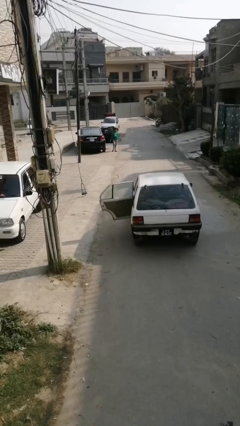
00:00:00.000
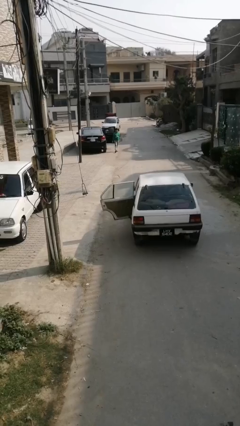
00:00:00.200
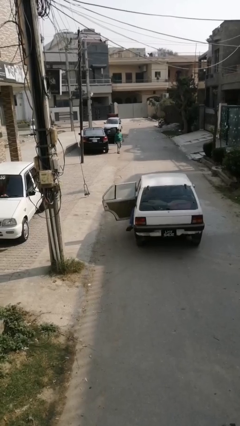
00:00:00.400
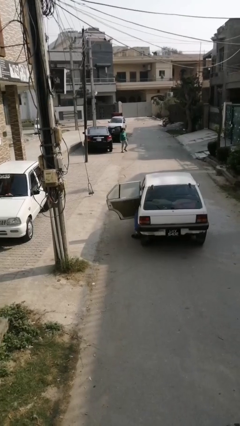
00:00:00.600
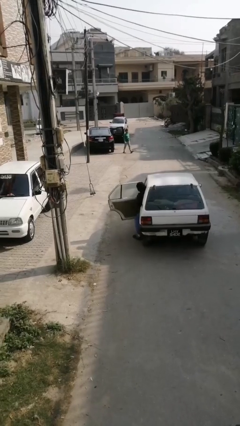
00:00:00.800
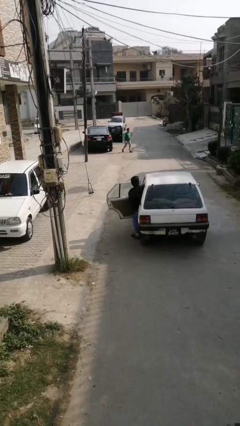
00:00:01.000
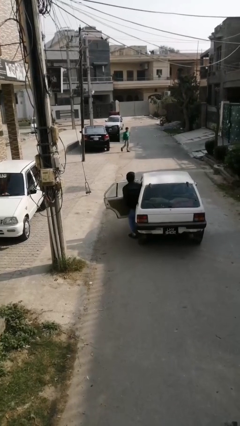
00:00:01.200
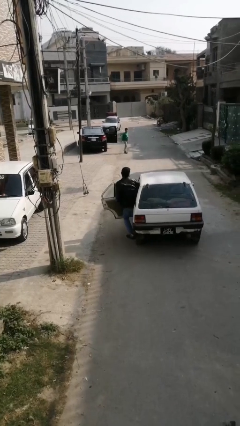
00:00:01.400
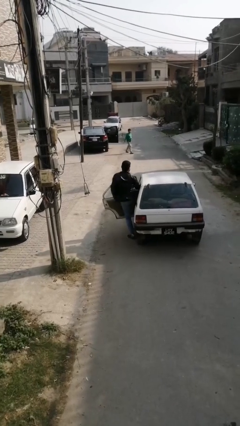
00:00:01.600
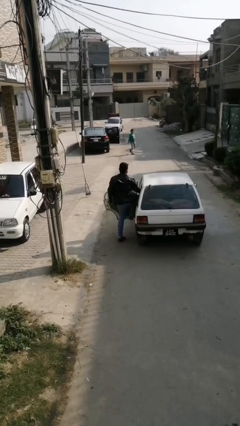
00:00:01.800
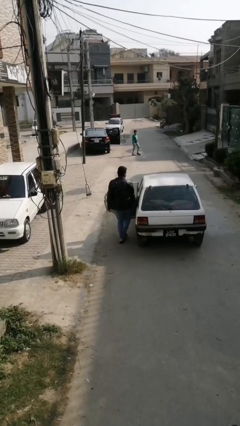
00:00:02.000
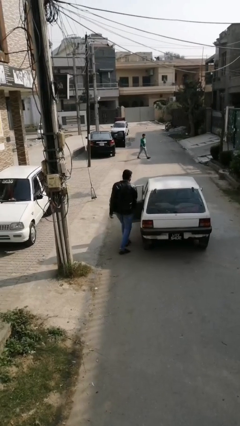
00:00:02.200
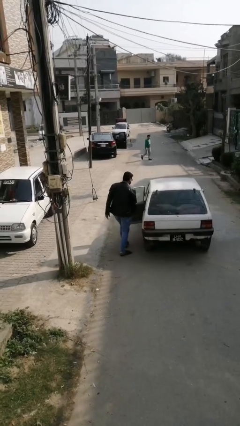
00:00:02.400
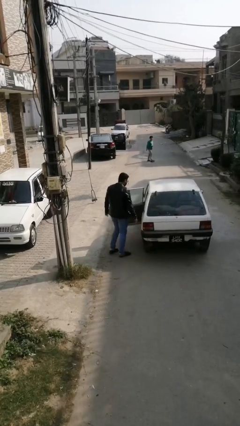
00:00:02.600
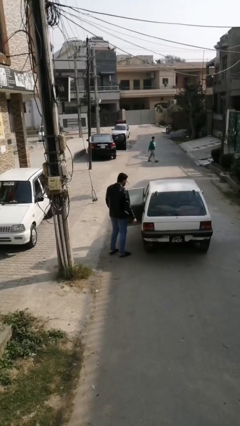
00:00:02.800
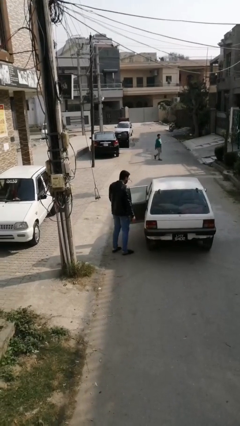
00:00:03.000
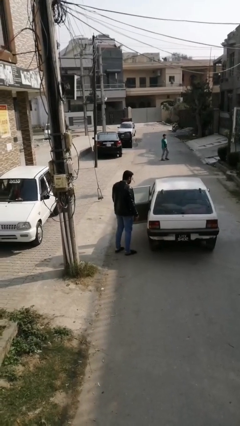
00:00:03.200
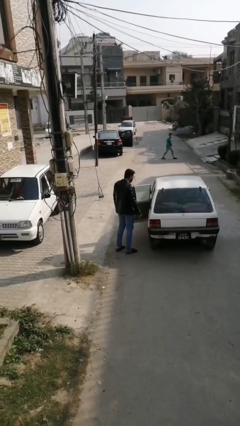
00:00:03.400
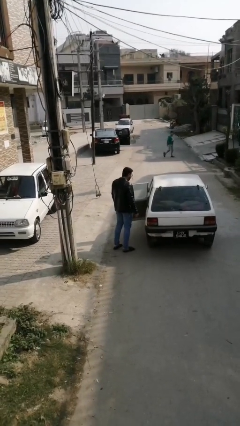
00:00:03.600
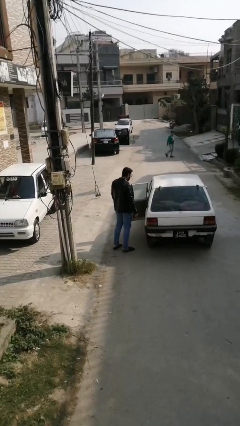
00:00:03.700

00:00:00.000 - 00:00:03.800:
person exits car

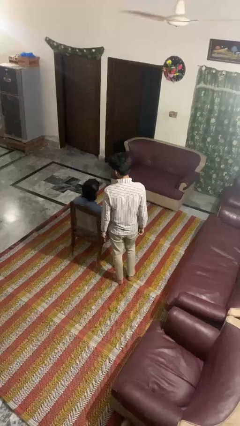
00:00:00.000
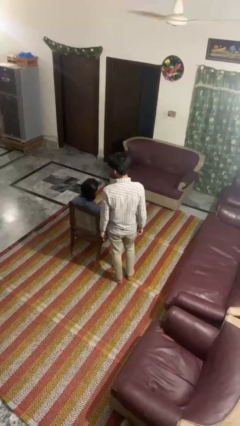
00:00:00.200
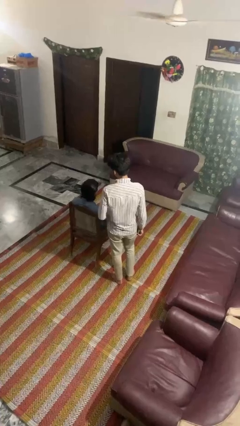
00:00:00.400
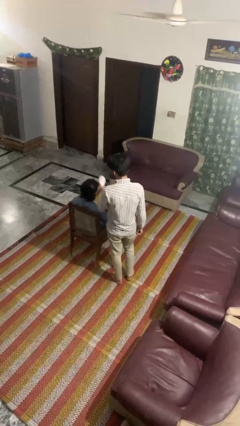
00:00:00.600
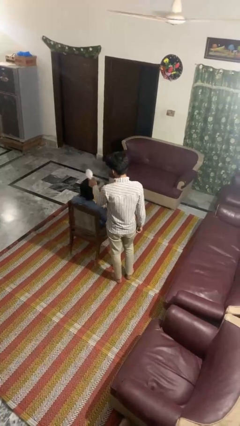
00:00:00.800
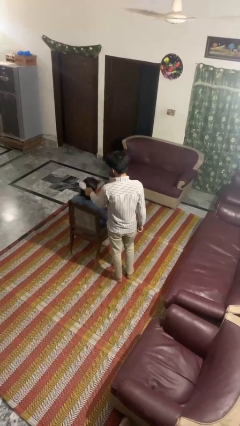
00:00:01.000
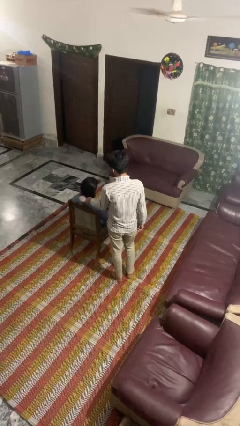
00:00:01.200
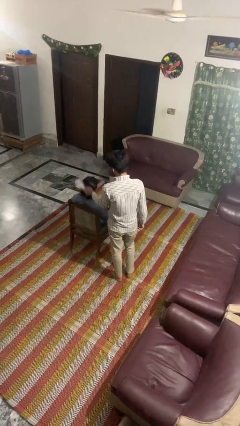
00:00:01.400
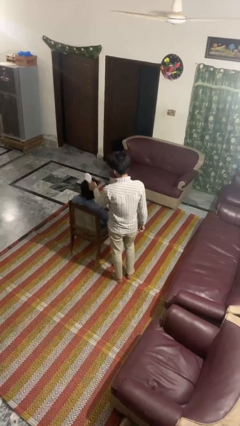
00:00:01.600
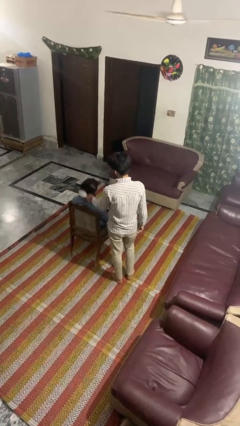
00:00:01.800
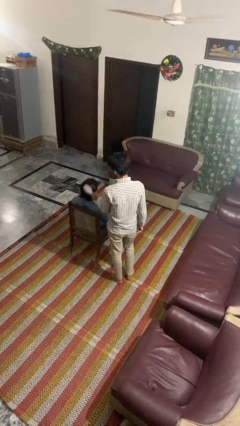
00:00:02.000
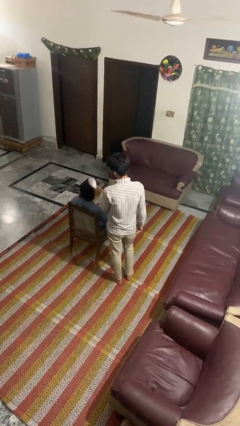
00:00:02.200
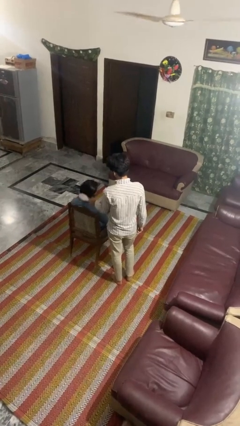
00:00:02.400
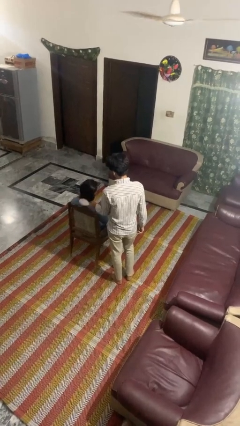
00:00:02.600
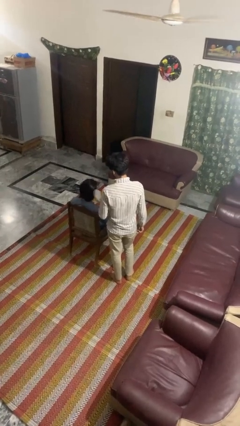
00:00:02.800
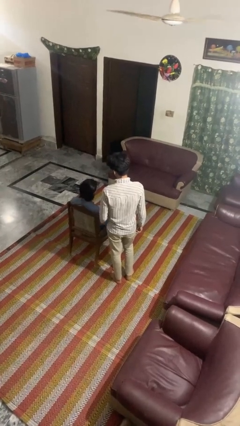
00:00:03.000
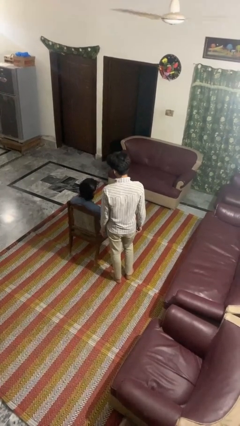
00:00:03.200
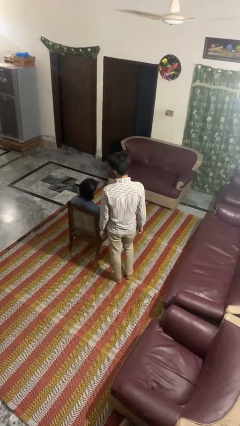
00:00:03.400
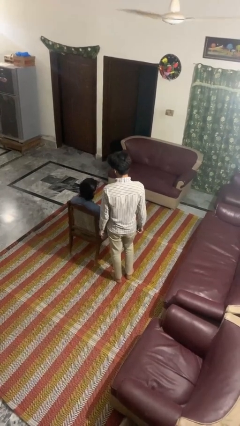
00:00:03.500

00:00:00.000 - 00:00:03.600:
person brushes hair of person

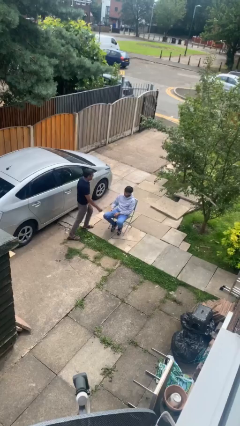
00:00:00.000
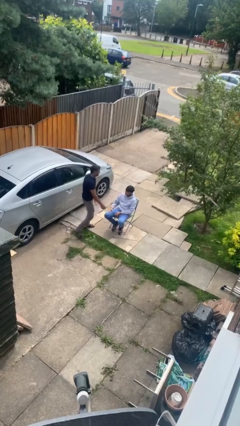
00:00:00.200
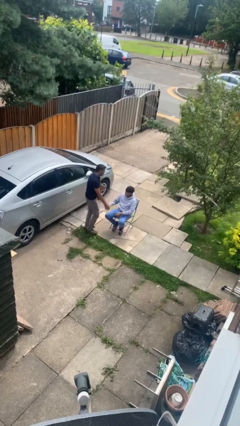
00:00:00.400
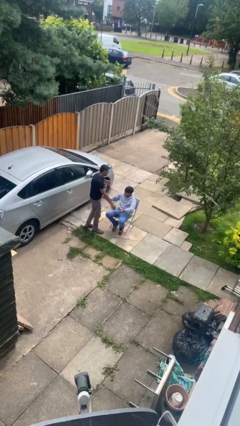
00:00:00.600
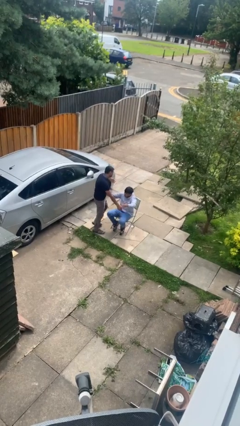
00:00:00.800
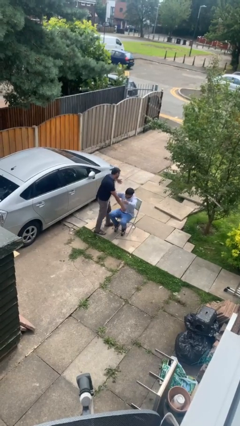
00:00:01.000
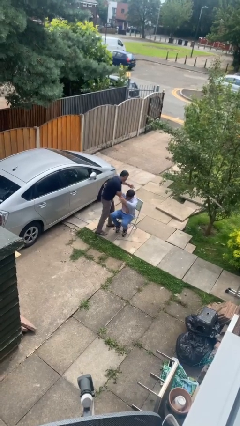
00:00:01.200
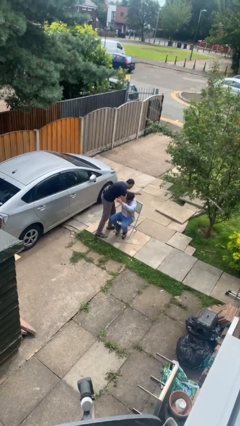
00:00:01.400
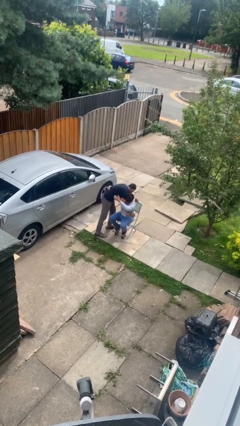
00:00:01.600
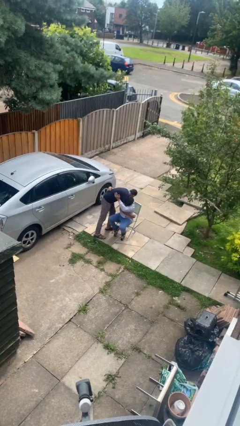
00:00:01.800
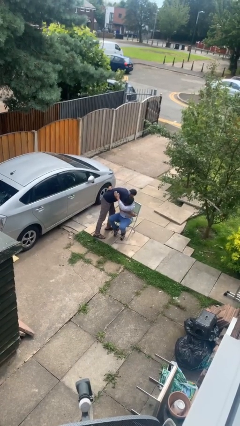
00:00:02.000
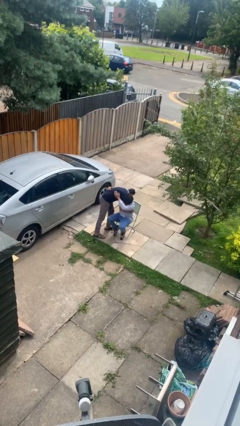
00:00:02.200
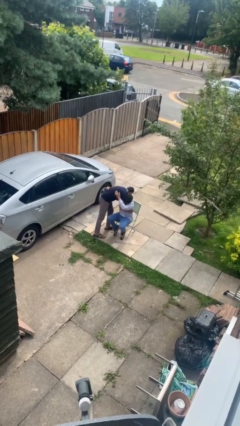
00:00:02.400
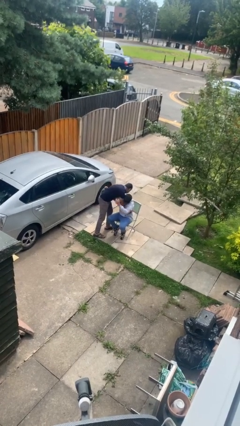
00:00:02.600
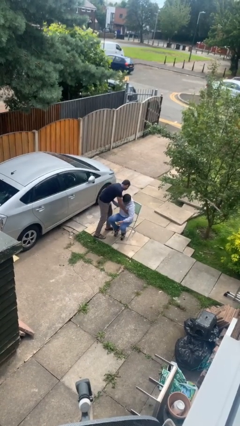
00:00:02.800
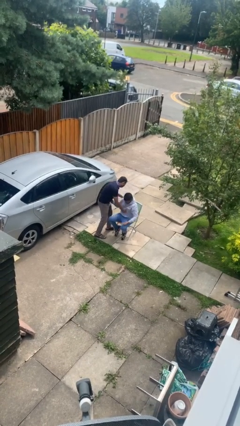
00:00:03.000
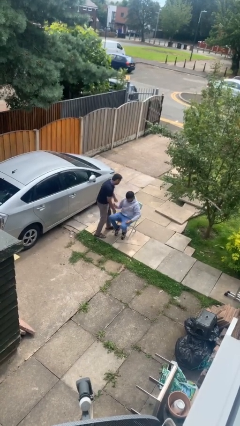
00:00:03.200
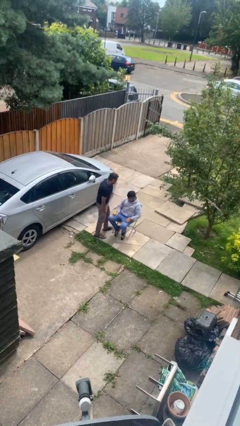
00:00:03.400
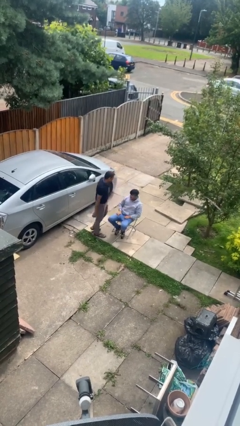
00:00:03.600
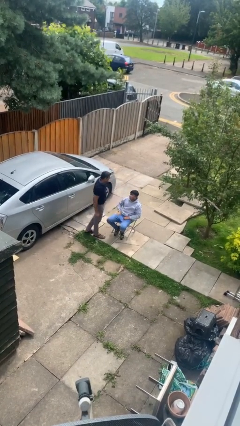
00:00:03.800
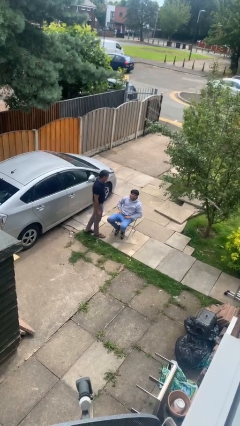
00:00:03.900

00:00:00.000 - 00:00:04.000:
person embraces person

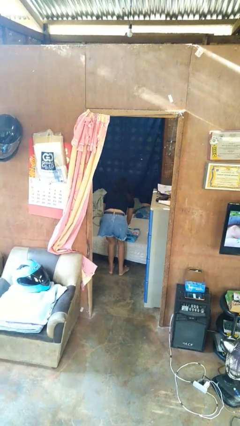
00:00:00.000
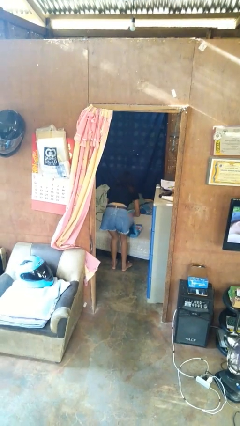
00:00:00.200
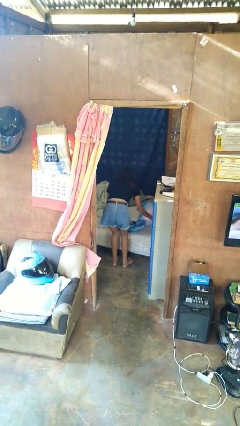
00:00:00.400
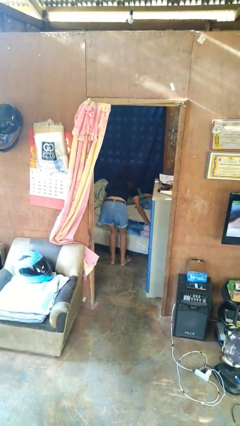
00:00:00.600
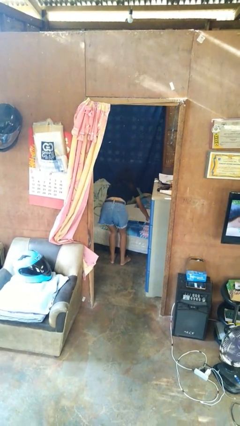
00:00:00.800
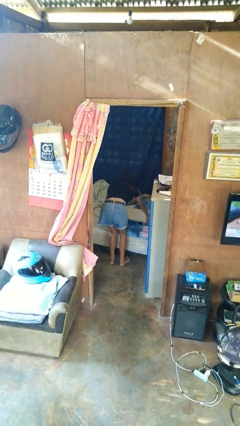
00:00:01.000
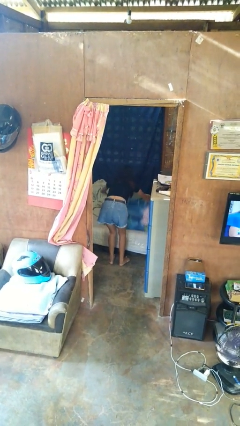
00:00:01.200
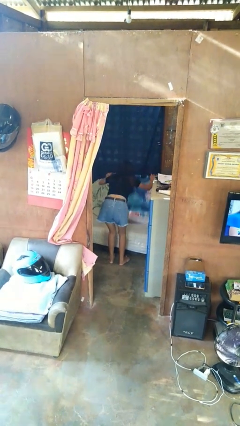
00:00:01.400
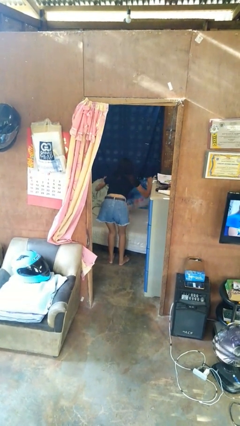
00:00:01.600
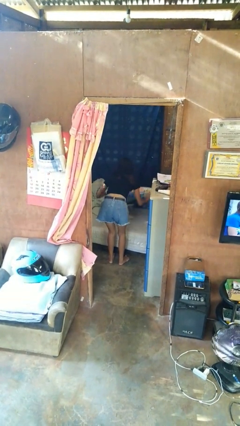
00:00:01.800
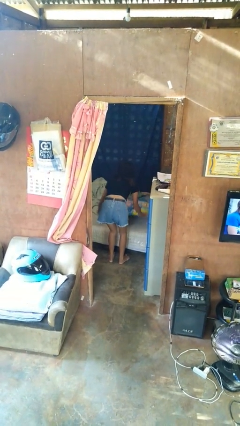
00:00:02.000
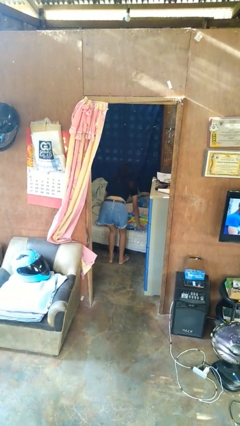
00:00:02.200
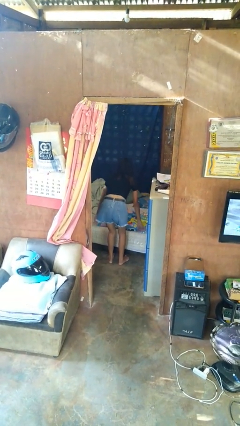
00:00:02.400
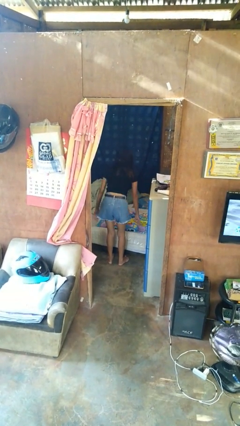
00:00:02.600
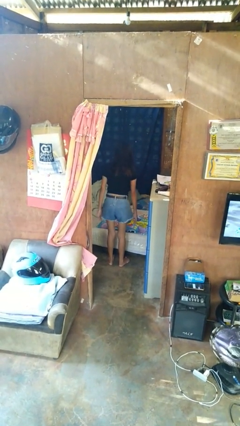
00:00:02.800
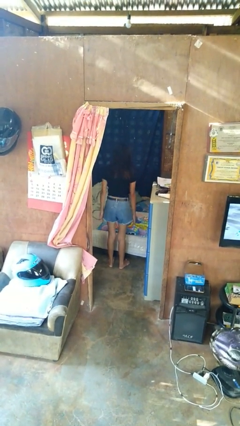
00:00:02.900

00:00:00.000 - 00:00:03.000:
person unfolds blanket

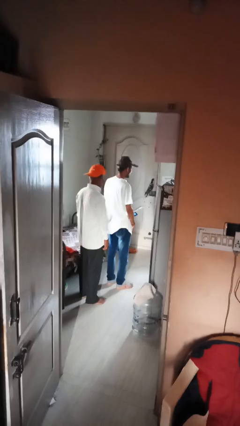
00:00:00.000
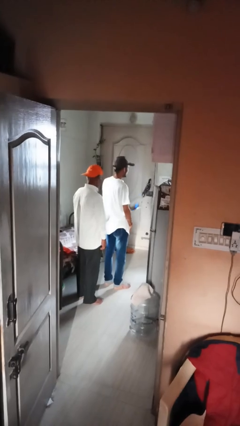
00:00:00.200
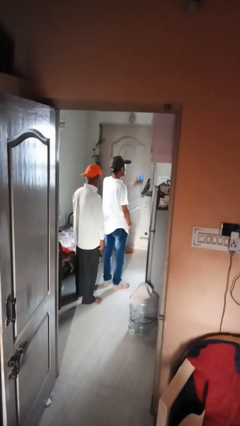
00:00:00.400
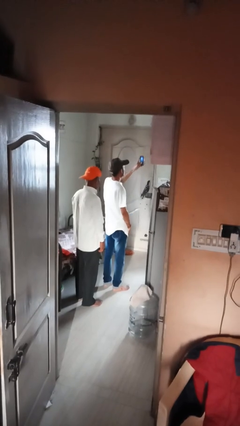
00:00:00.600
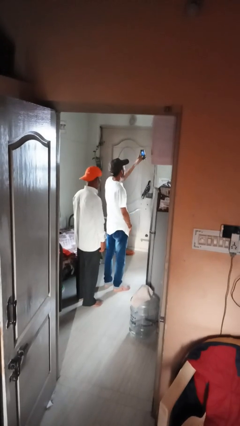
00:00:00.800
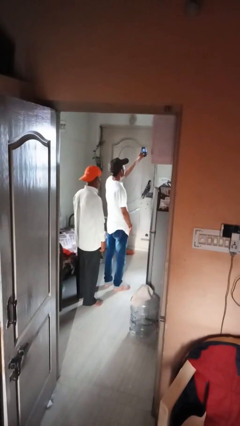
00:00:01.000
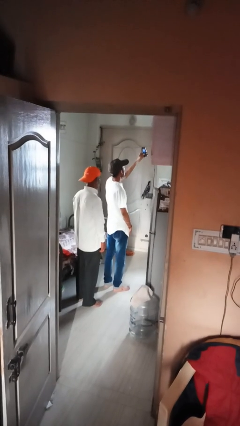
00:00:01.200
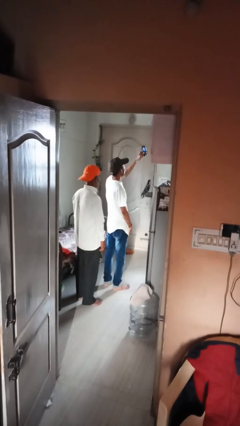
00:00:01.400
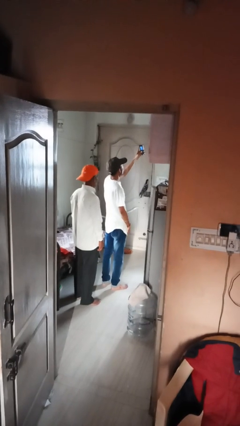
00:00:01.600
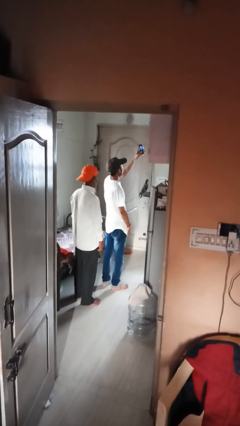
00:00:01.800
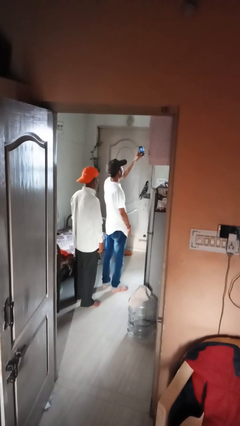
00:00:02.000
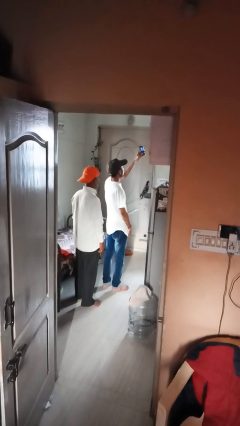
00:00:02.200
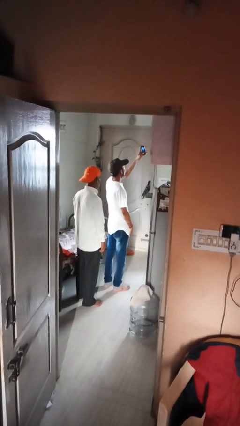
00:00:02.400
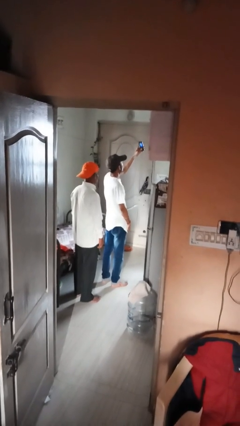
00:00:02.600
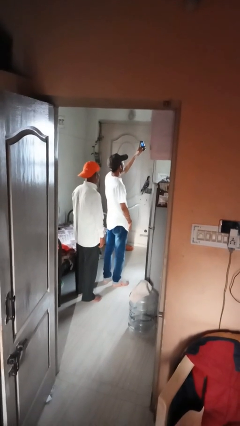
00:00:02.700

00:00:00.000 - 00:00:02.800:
person takes selfie with person

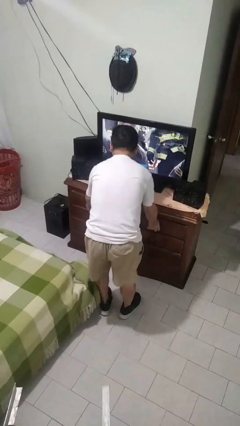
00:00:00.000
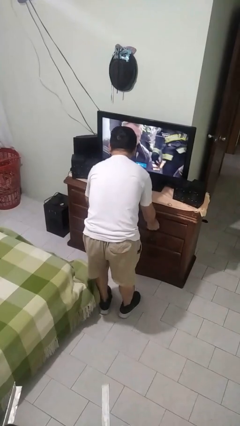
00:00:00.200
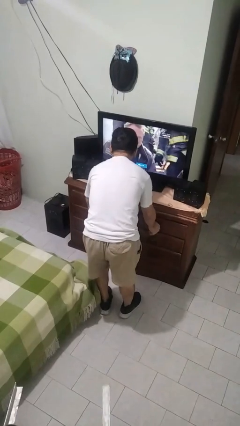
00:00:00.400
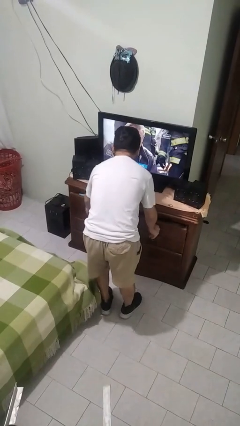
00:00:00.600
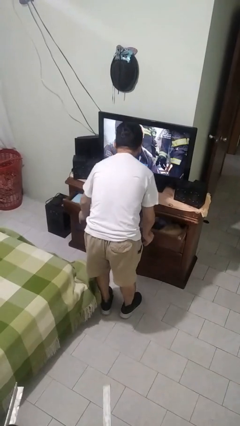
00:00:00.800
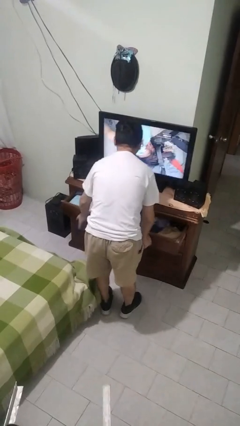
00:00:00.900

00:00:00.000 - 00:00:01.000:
person opens dresser drawer
